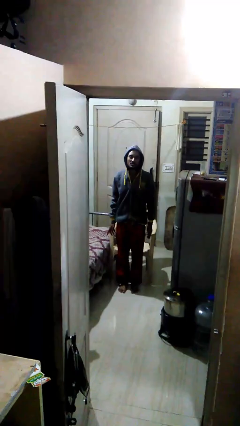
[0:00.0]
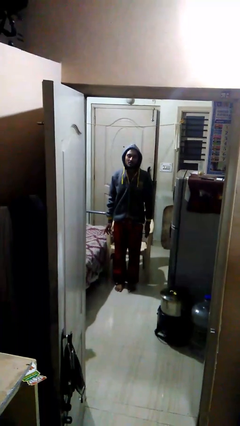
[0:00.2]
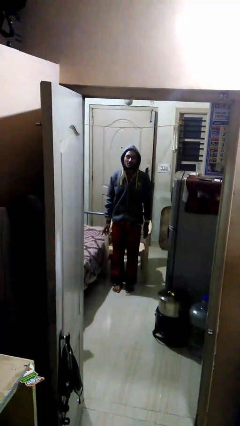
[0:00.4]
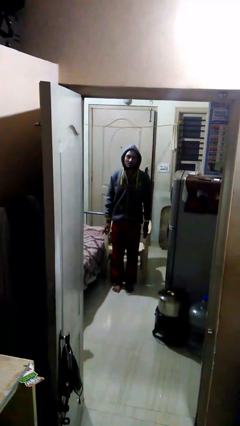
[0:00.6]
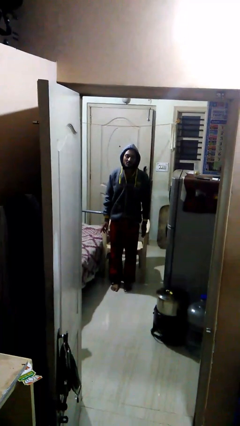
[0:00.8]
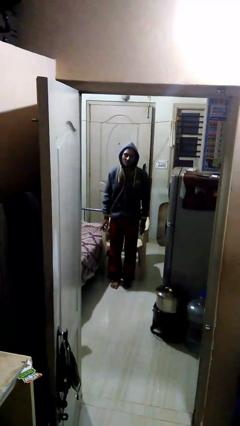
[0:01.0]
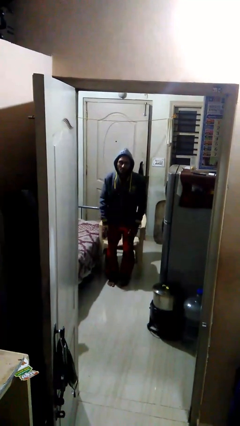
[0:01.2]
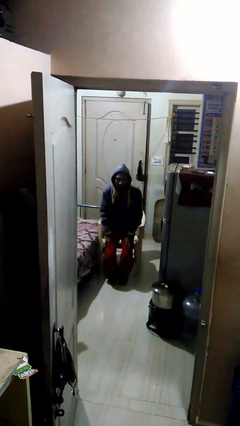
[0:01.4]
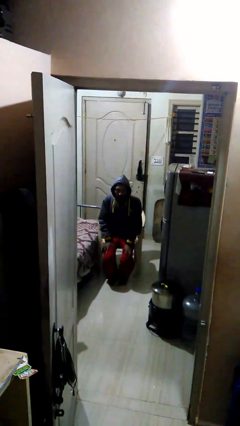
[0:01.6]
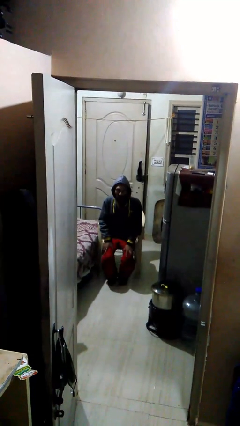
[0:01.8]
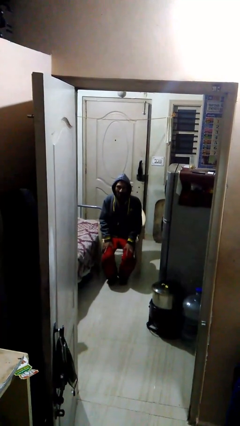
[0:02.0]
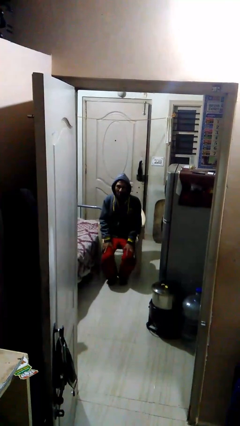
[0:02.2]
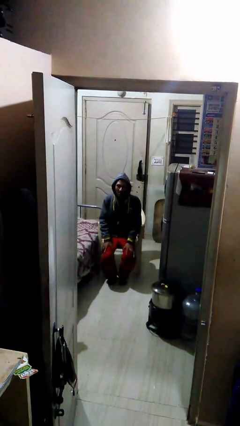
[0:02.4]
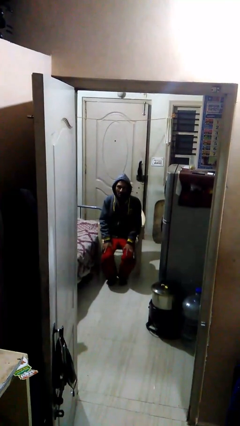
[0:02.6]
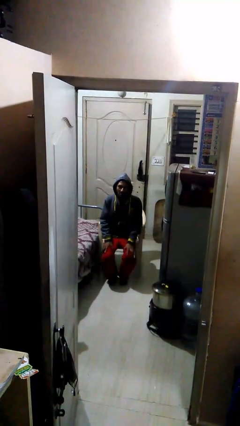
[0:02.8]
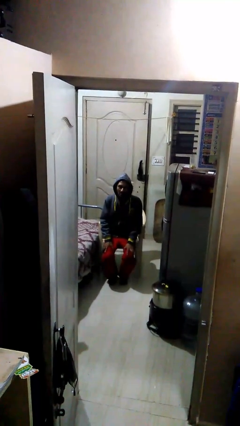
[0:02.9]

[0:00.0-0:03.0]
person stands up

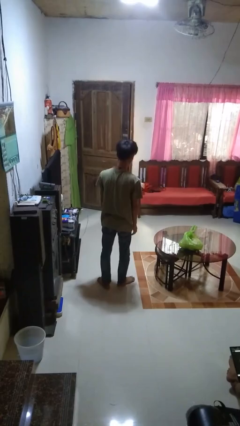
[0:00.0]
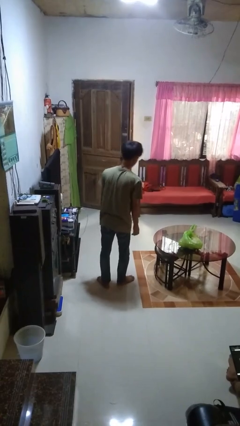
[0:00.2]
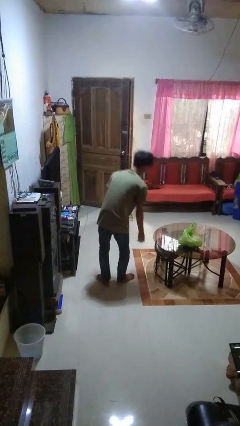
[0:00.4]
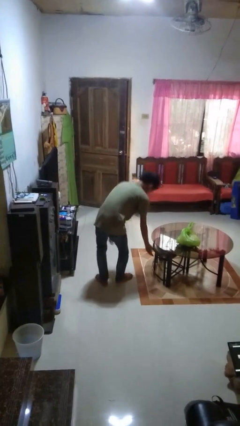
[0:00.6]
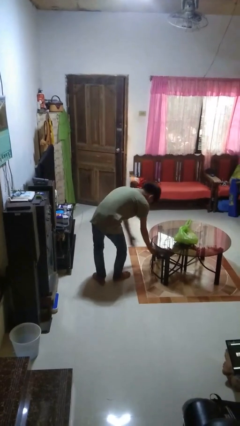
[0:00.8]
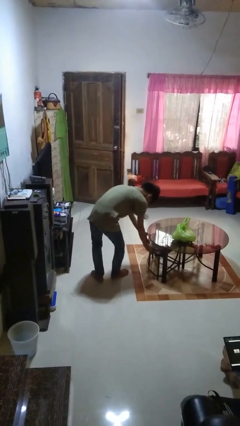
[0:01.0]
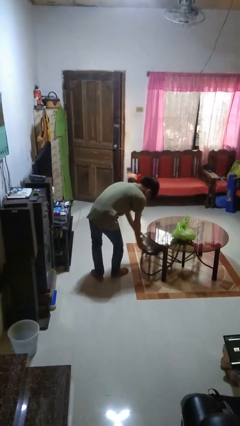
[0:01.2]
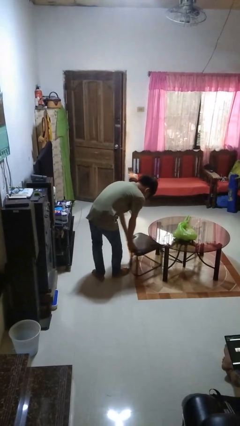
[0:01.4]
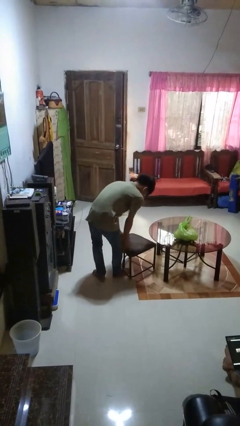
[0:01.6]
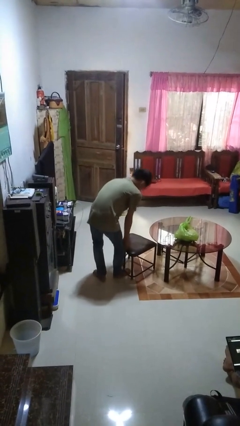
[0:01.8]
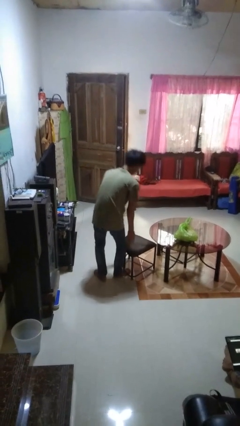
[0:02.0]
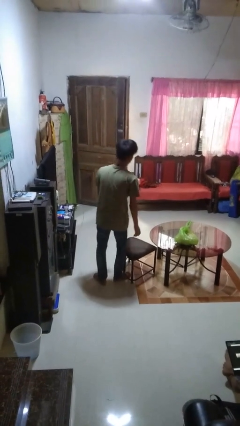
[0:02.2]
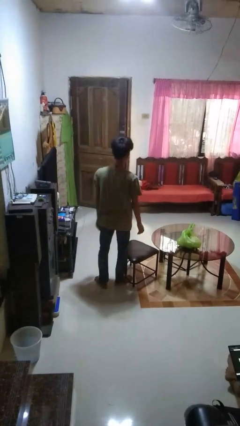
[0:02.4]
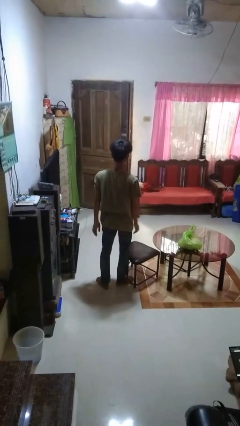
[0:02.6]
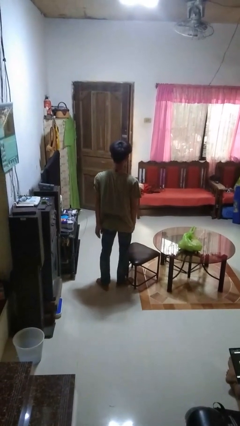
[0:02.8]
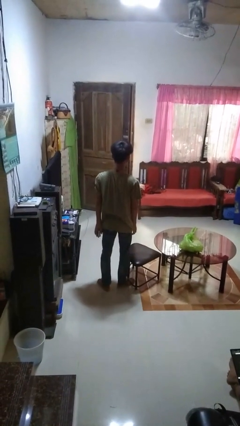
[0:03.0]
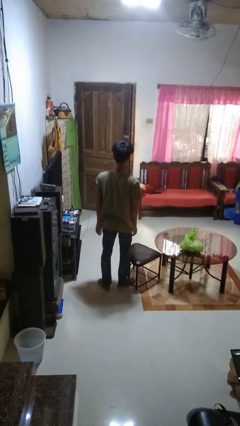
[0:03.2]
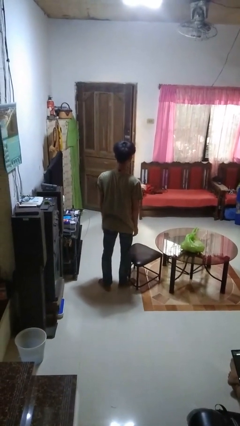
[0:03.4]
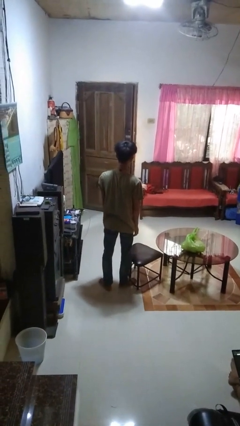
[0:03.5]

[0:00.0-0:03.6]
person pulls out chair

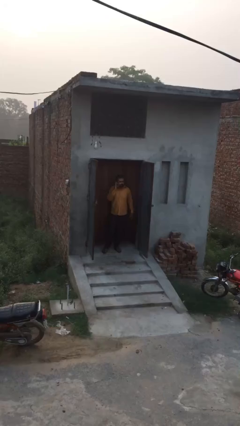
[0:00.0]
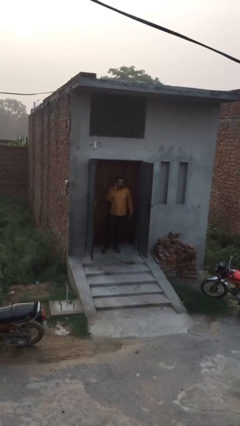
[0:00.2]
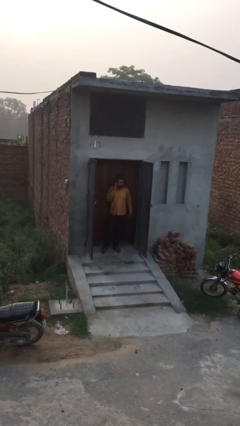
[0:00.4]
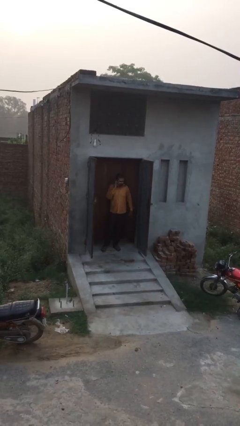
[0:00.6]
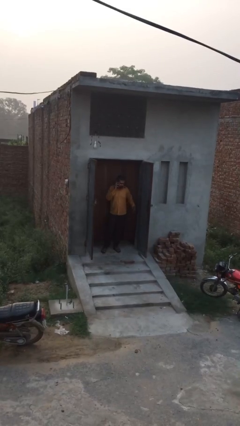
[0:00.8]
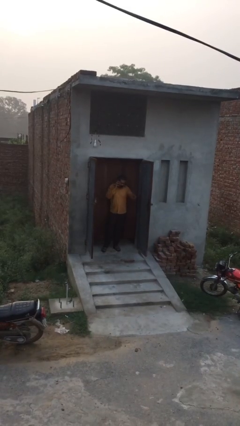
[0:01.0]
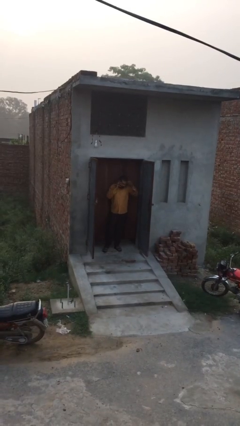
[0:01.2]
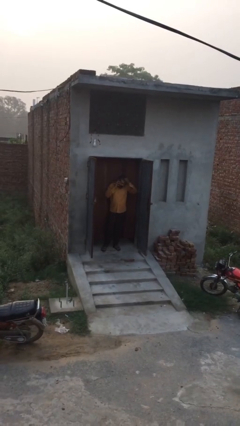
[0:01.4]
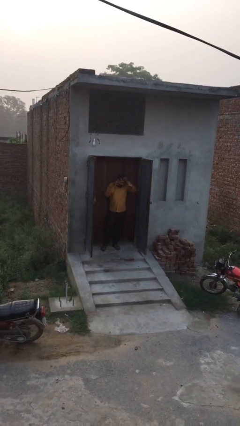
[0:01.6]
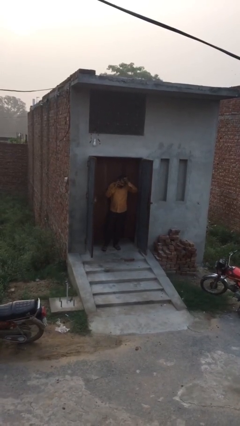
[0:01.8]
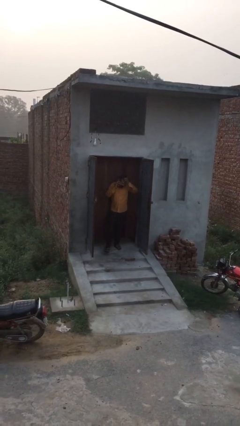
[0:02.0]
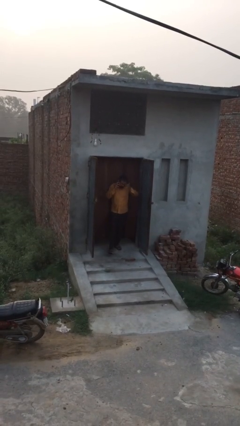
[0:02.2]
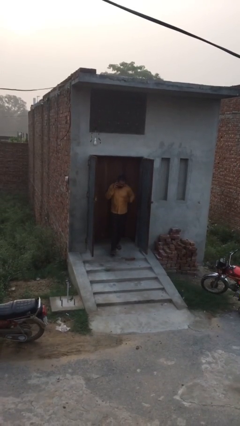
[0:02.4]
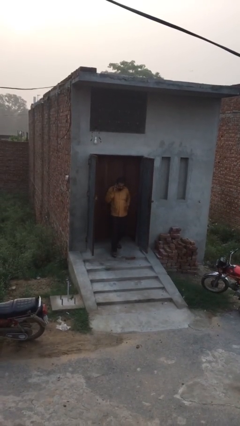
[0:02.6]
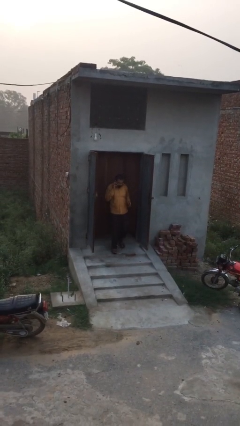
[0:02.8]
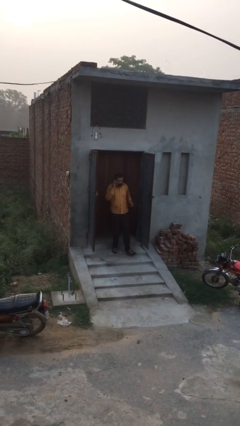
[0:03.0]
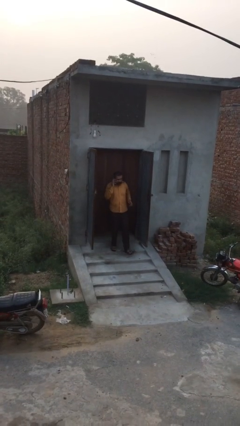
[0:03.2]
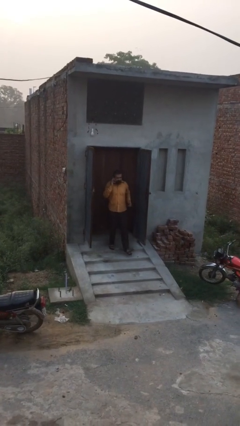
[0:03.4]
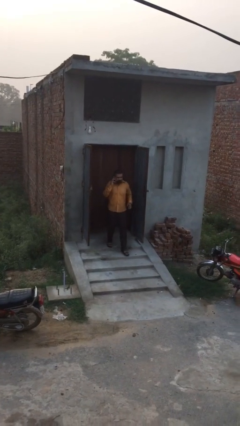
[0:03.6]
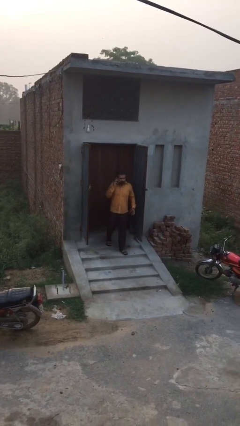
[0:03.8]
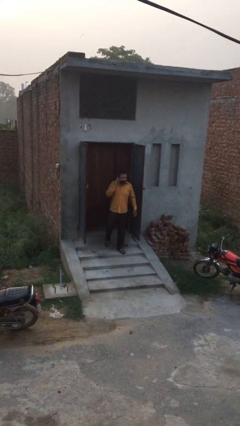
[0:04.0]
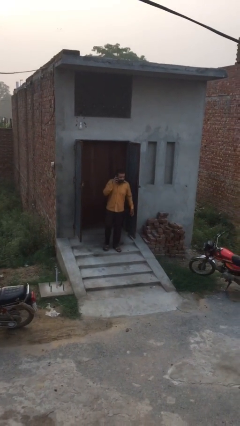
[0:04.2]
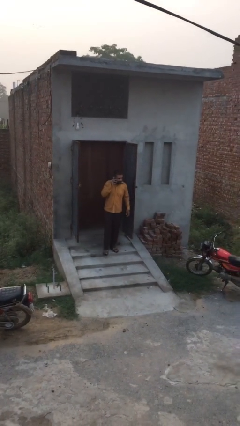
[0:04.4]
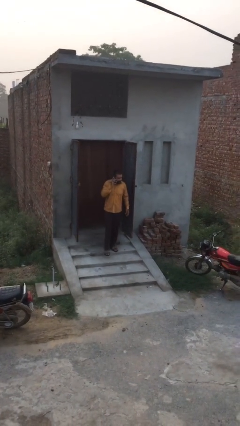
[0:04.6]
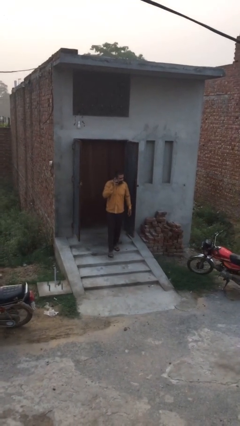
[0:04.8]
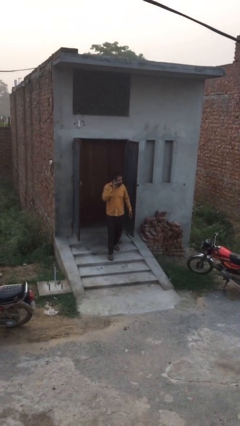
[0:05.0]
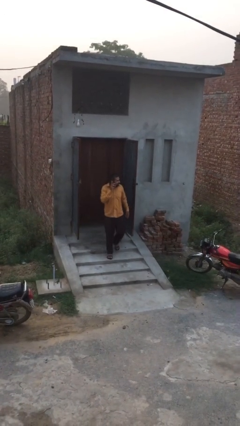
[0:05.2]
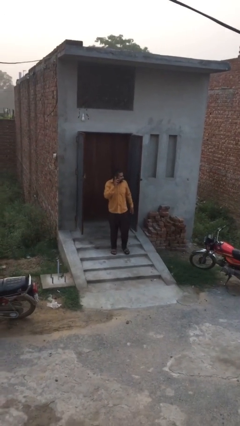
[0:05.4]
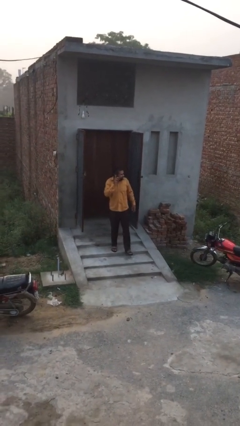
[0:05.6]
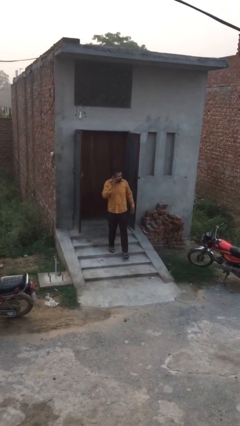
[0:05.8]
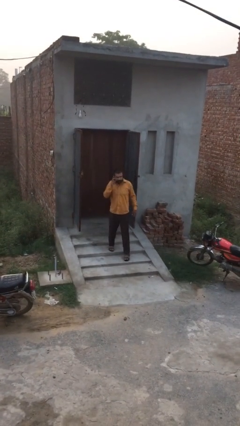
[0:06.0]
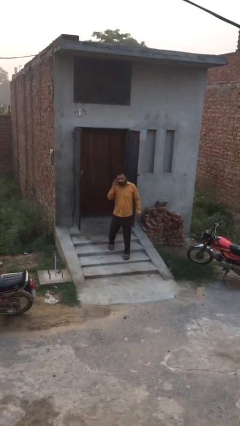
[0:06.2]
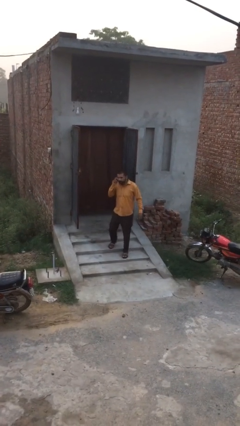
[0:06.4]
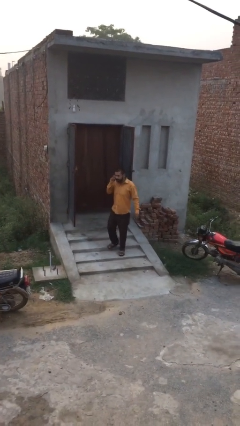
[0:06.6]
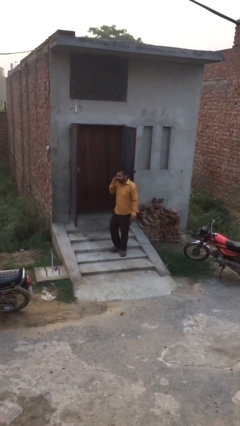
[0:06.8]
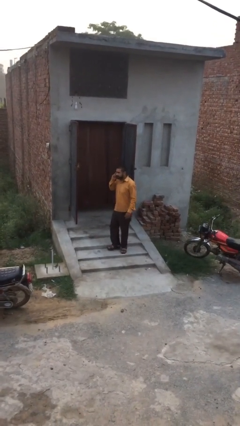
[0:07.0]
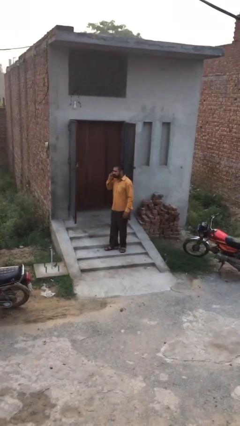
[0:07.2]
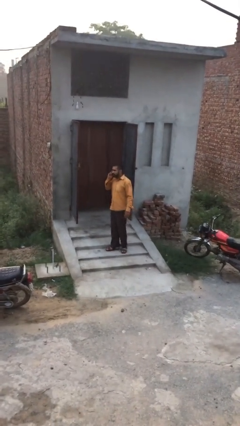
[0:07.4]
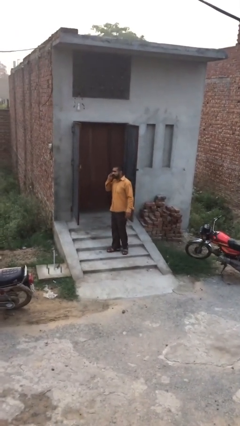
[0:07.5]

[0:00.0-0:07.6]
person enters scene through structure

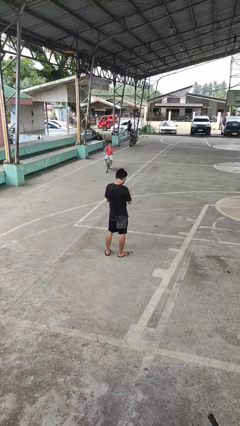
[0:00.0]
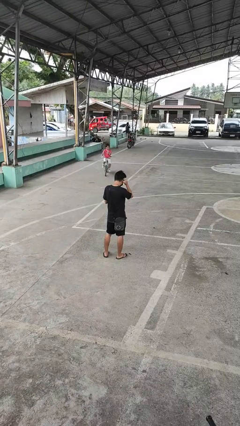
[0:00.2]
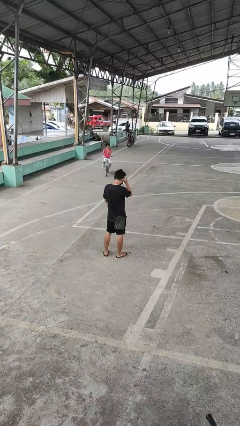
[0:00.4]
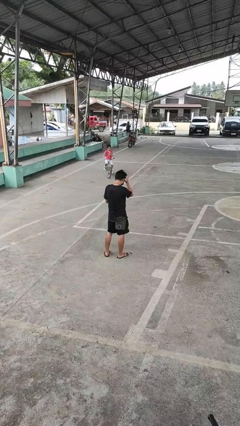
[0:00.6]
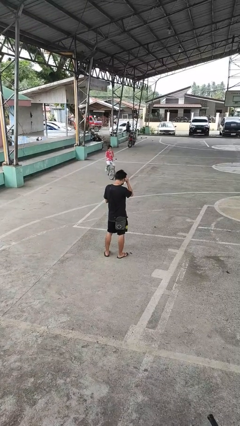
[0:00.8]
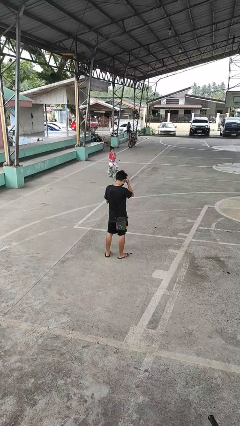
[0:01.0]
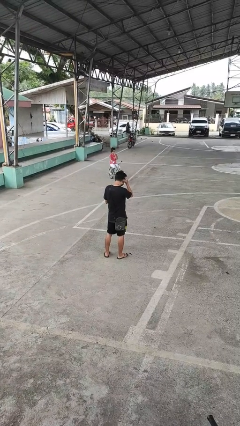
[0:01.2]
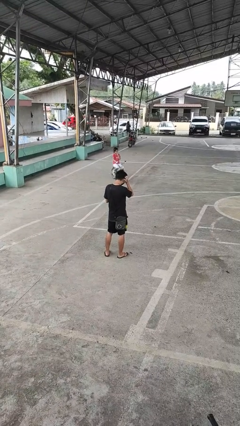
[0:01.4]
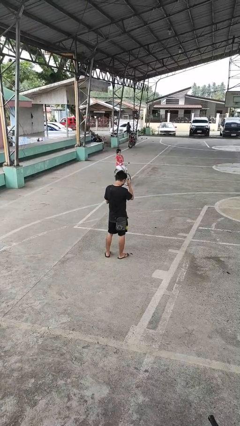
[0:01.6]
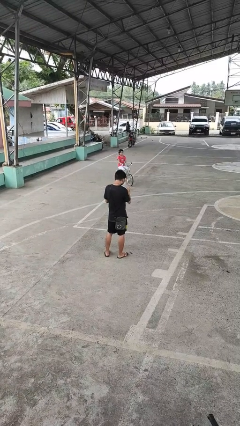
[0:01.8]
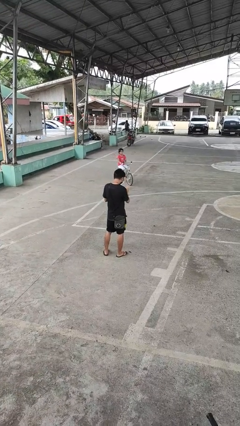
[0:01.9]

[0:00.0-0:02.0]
person scratches face

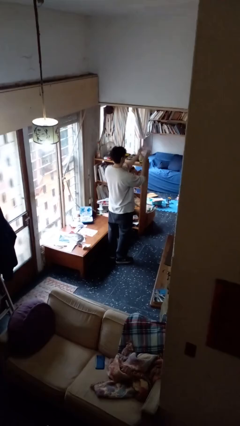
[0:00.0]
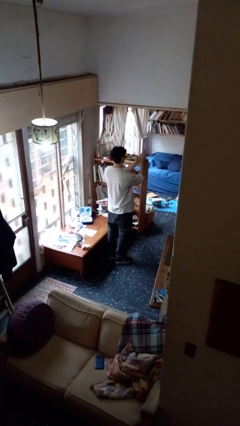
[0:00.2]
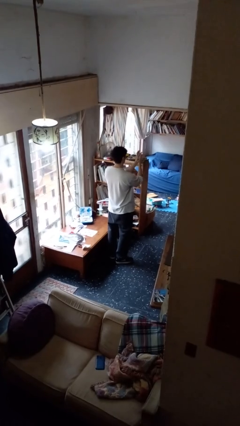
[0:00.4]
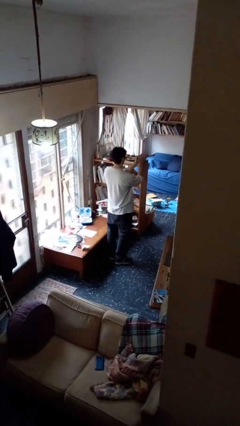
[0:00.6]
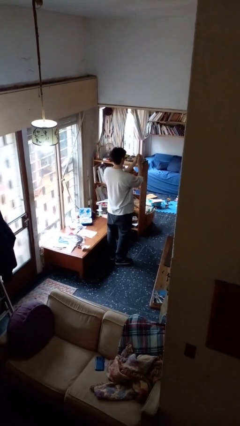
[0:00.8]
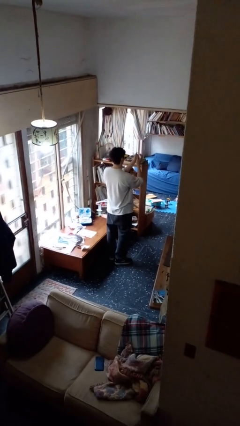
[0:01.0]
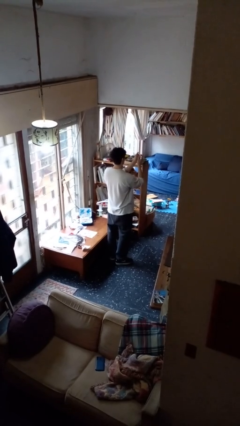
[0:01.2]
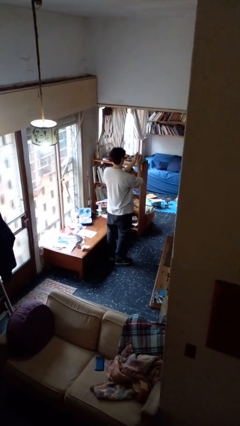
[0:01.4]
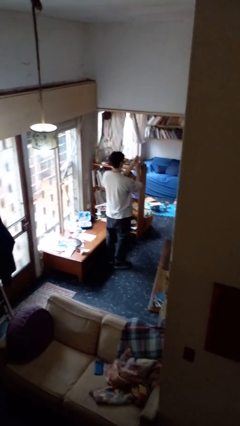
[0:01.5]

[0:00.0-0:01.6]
person crumples paper
